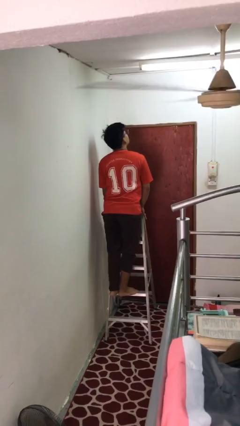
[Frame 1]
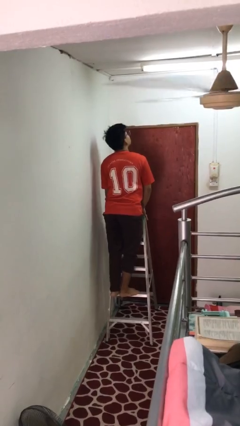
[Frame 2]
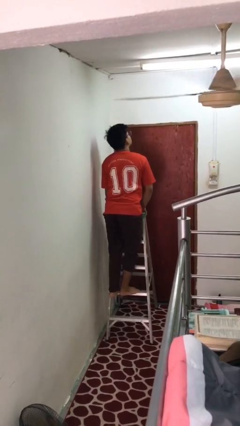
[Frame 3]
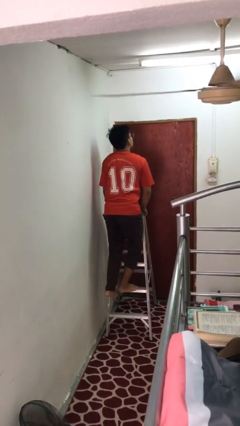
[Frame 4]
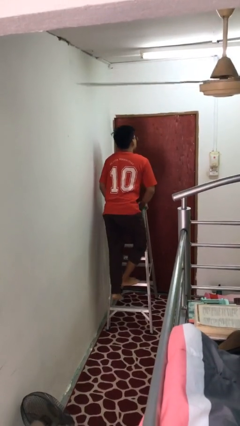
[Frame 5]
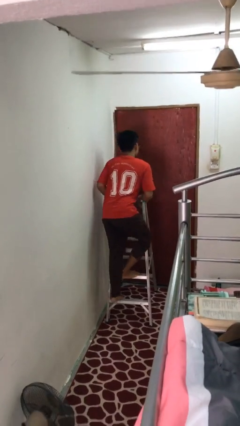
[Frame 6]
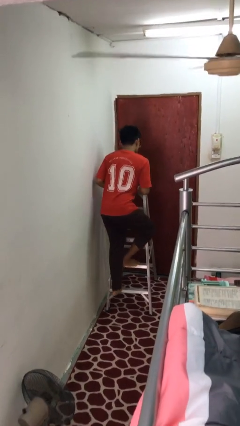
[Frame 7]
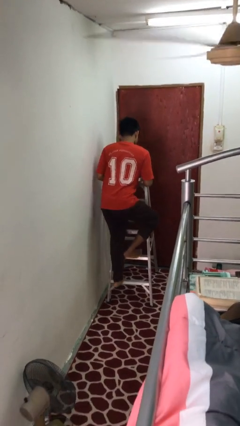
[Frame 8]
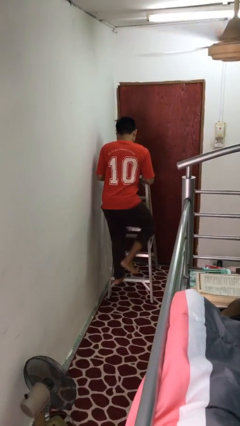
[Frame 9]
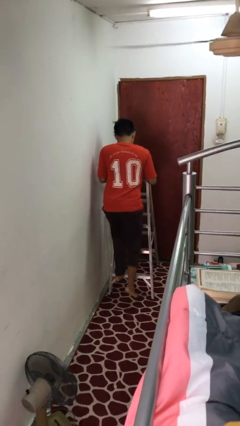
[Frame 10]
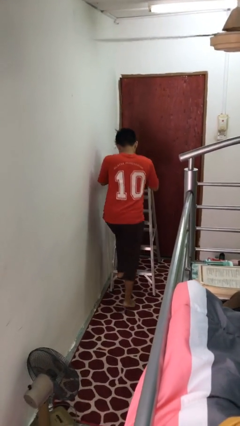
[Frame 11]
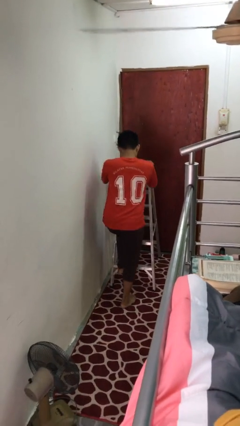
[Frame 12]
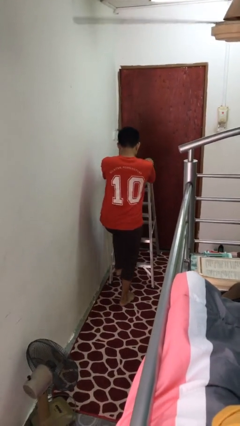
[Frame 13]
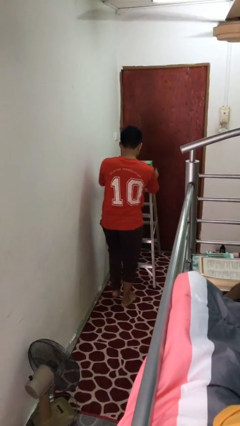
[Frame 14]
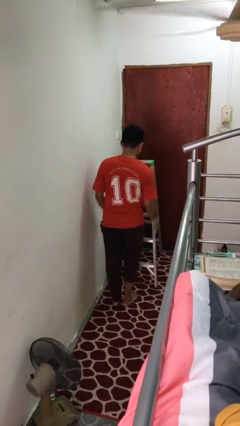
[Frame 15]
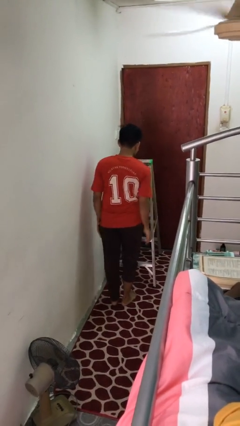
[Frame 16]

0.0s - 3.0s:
person climbs down ladder

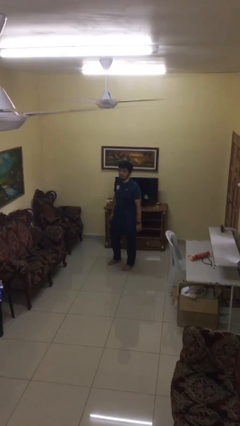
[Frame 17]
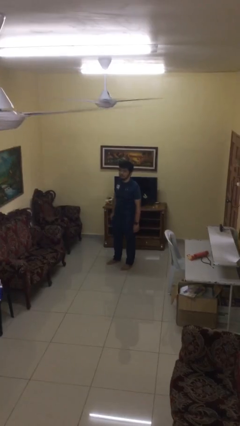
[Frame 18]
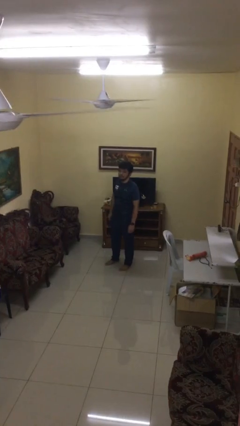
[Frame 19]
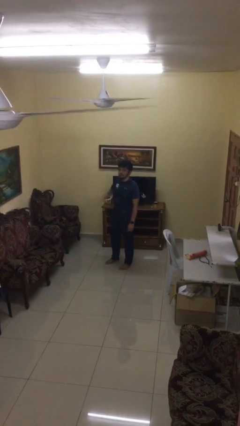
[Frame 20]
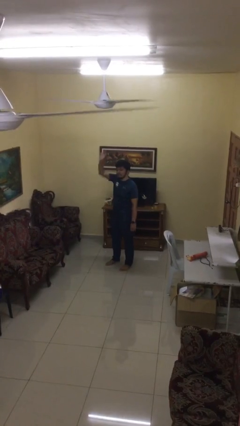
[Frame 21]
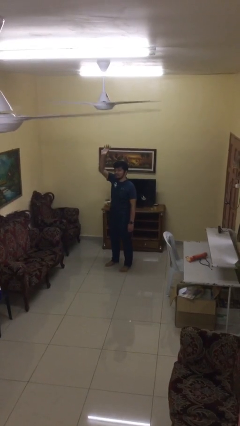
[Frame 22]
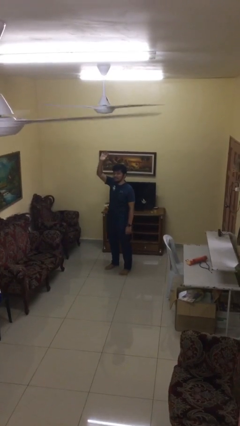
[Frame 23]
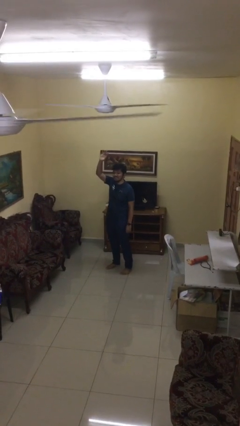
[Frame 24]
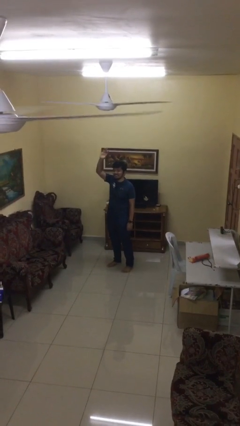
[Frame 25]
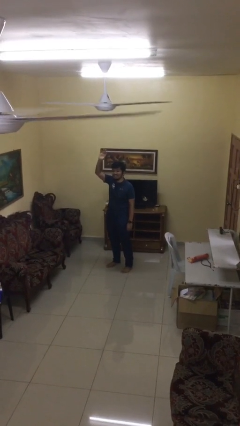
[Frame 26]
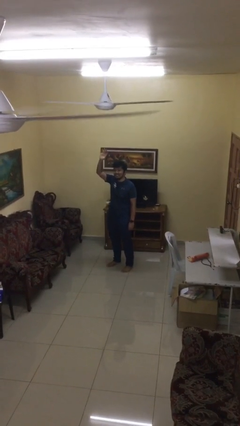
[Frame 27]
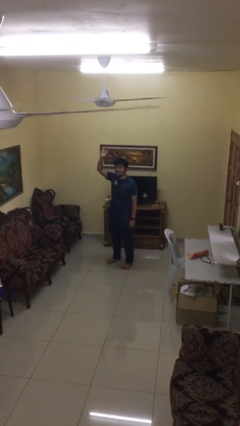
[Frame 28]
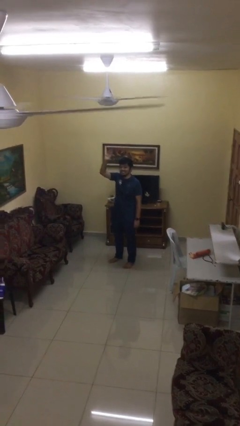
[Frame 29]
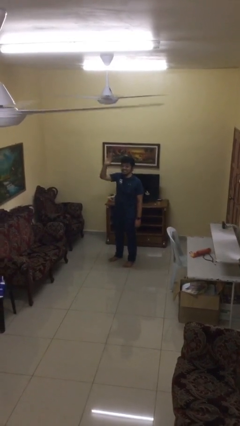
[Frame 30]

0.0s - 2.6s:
person gestures raise hand

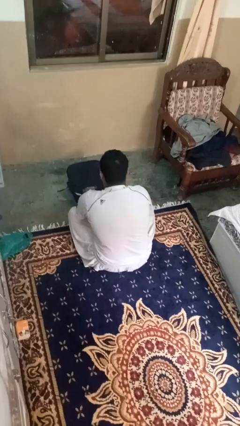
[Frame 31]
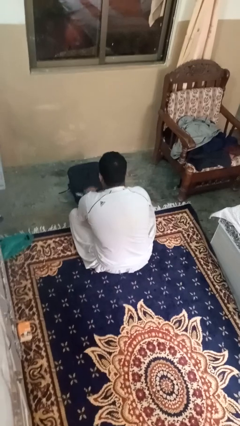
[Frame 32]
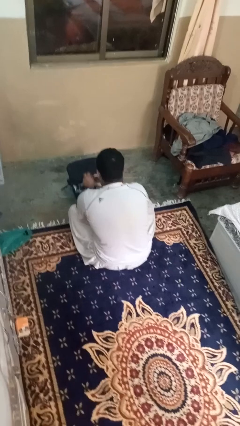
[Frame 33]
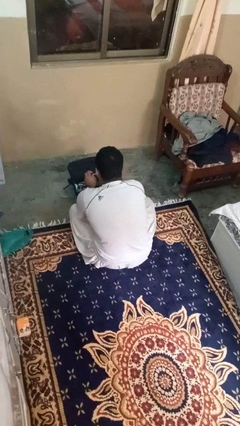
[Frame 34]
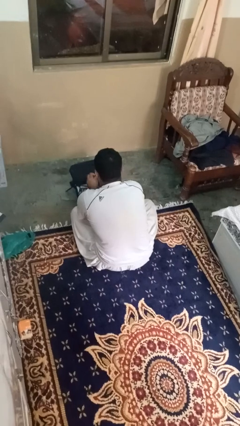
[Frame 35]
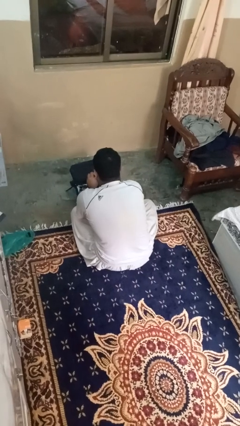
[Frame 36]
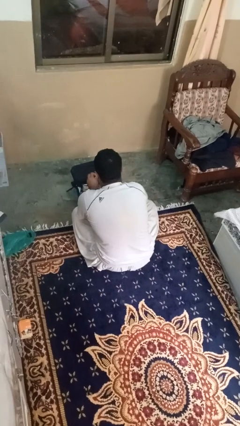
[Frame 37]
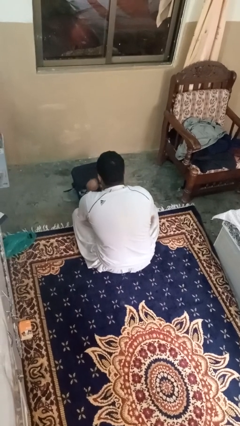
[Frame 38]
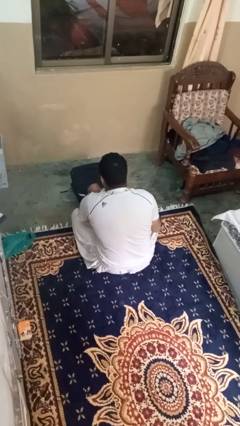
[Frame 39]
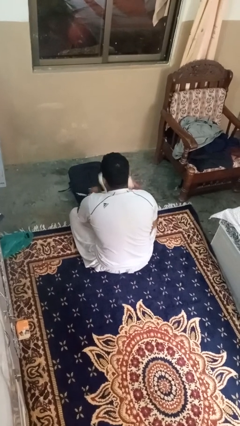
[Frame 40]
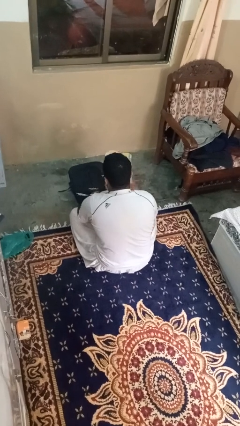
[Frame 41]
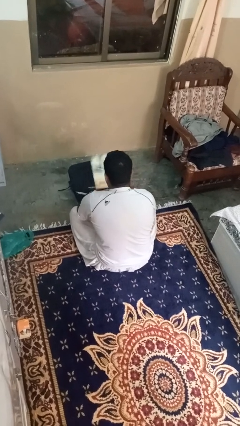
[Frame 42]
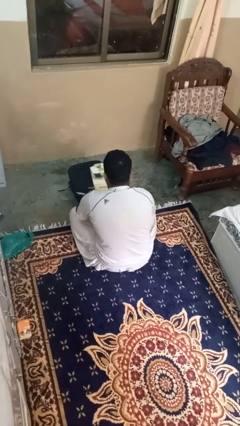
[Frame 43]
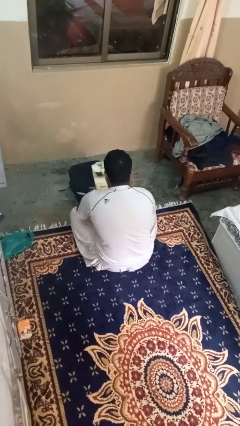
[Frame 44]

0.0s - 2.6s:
person takes object from bag

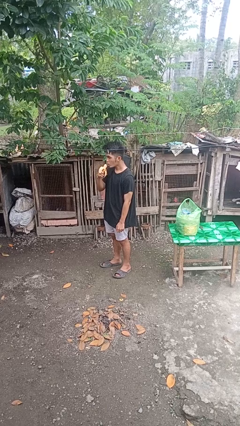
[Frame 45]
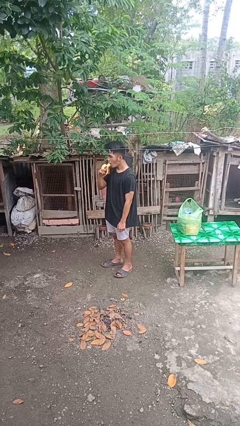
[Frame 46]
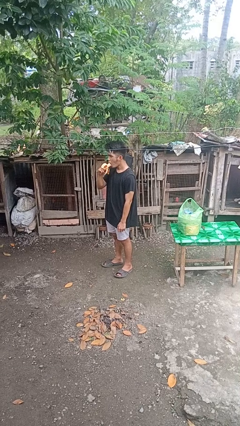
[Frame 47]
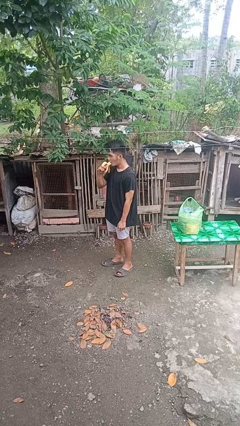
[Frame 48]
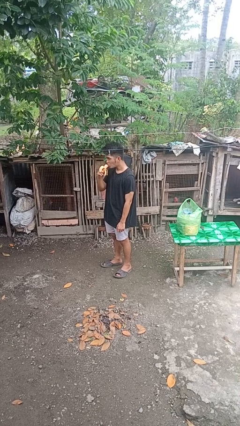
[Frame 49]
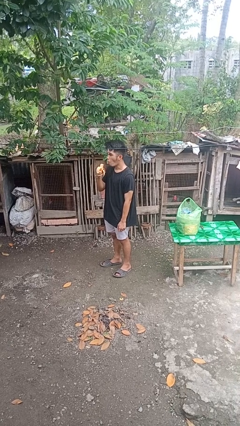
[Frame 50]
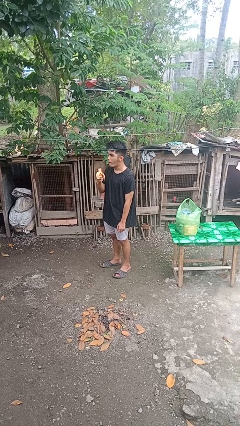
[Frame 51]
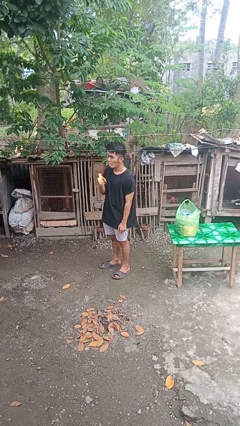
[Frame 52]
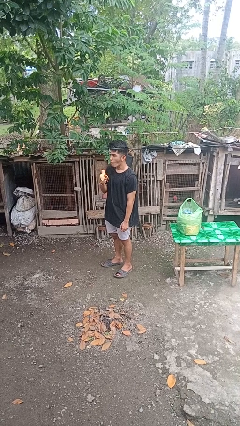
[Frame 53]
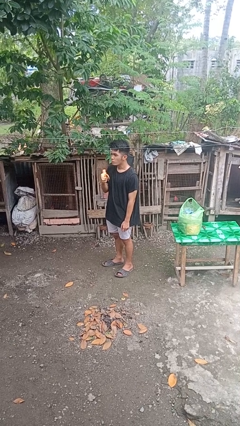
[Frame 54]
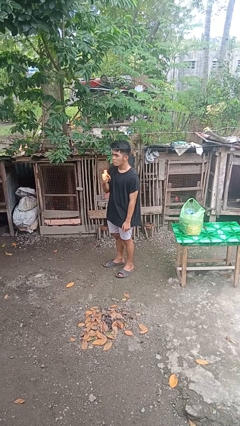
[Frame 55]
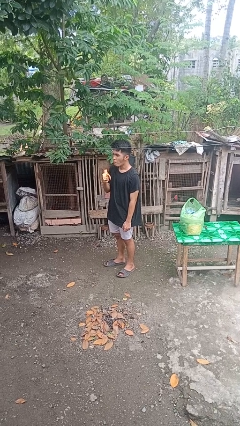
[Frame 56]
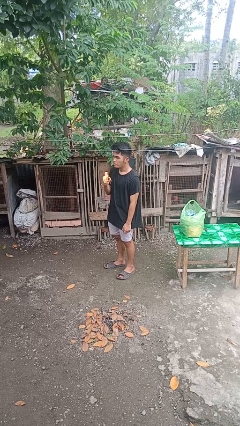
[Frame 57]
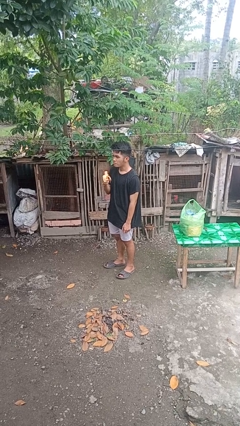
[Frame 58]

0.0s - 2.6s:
person eats banana

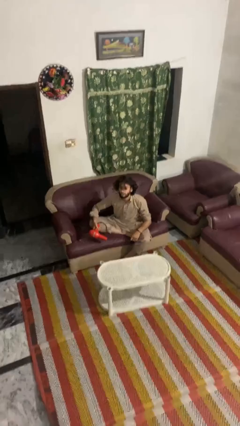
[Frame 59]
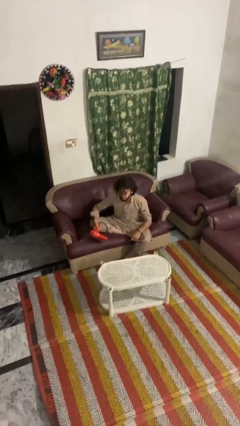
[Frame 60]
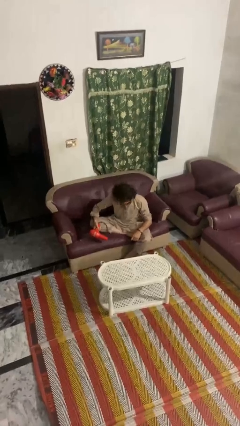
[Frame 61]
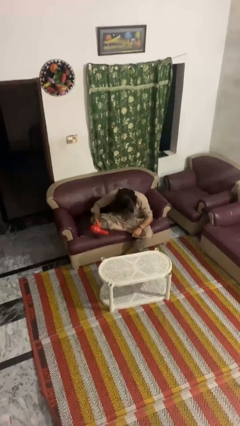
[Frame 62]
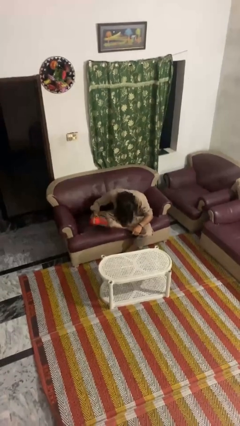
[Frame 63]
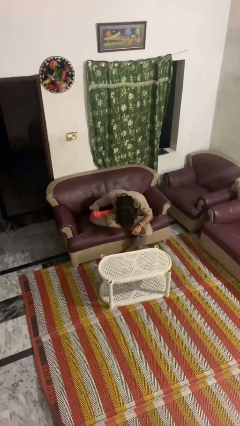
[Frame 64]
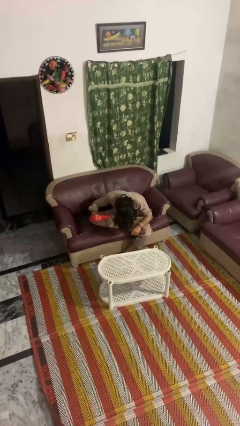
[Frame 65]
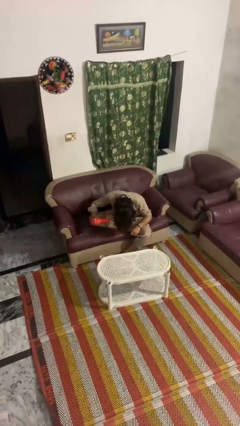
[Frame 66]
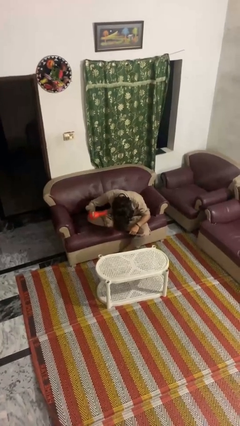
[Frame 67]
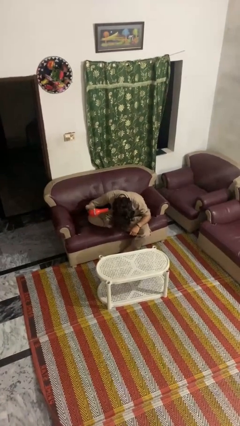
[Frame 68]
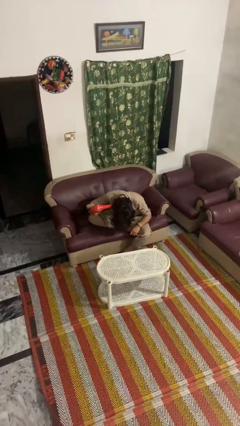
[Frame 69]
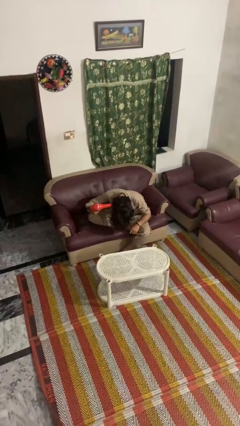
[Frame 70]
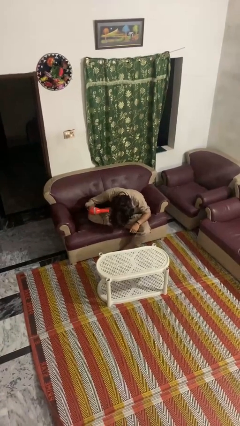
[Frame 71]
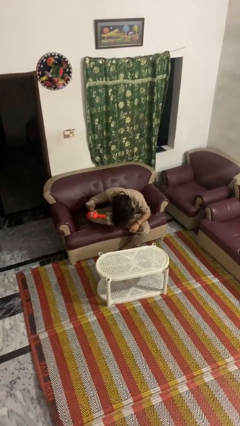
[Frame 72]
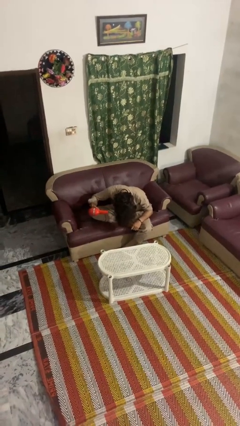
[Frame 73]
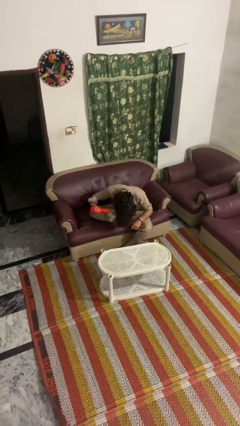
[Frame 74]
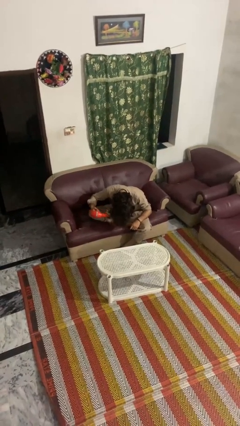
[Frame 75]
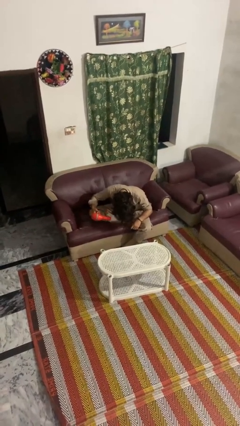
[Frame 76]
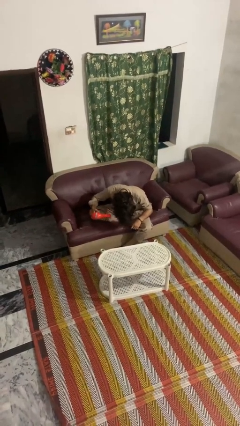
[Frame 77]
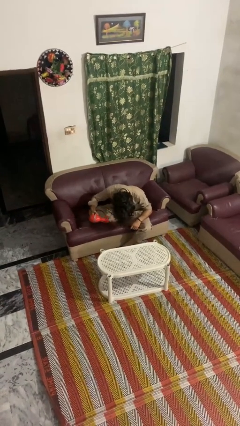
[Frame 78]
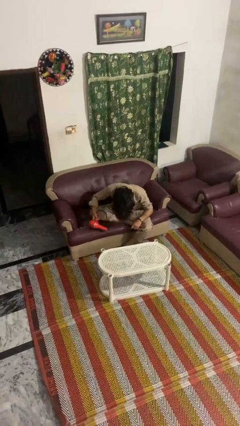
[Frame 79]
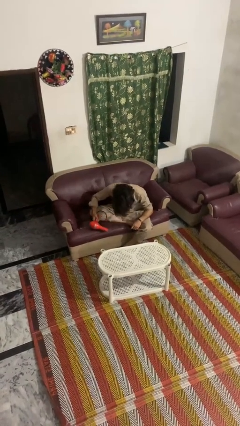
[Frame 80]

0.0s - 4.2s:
person dries hair with hairdryer

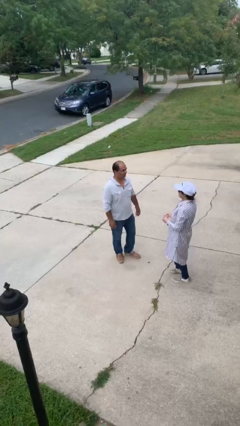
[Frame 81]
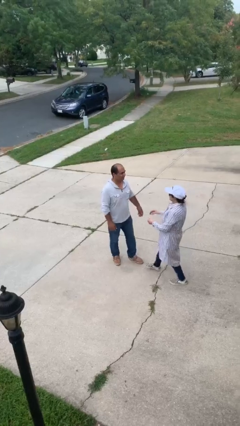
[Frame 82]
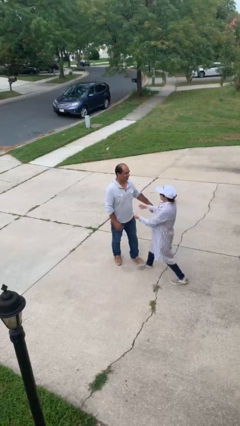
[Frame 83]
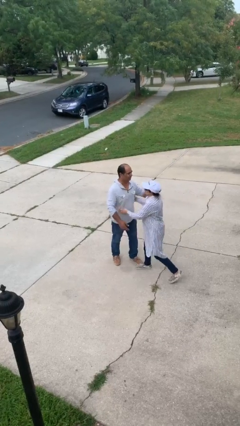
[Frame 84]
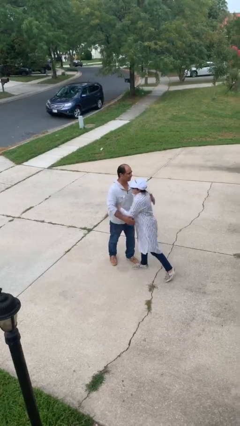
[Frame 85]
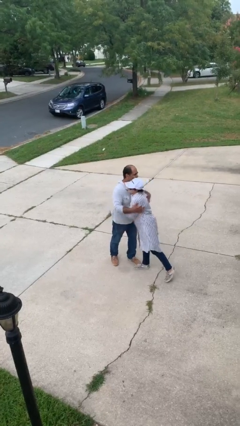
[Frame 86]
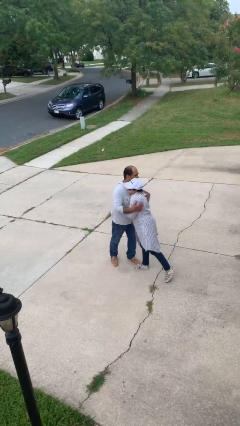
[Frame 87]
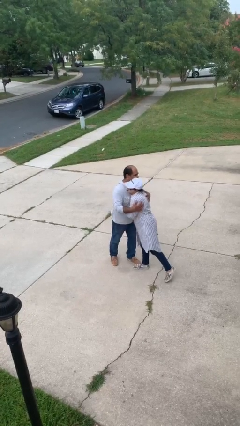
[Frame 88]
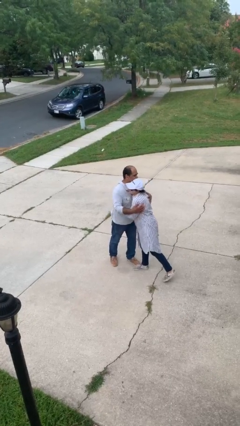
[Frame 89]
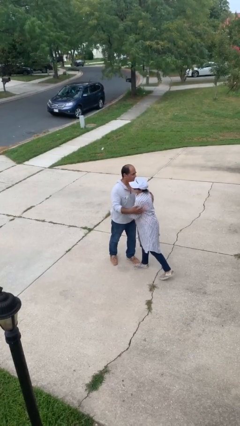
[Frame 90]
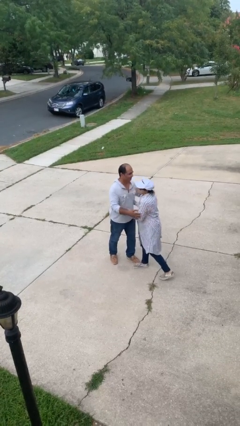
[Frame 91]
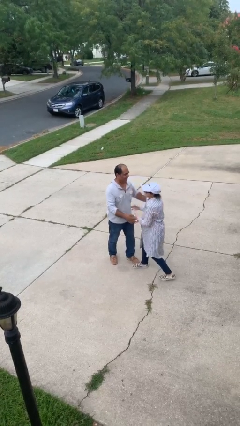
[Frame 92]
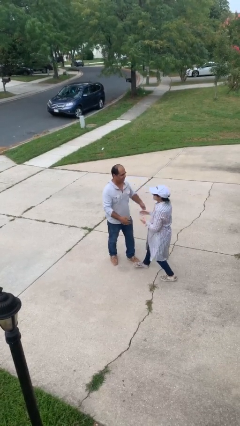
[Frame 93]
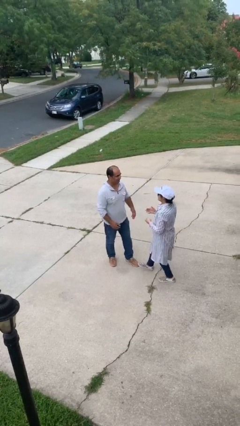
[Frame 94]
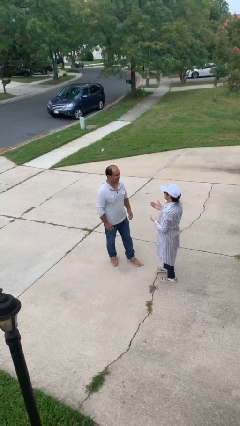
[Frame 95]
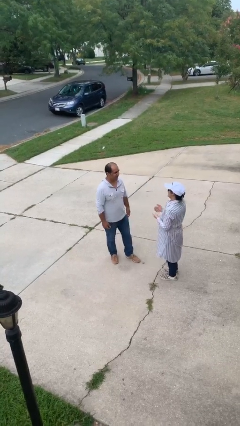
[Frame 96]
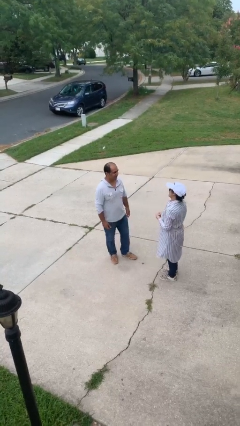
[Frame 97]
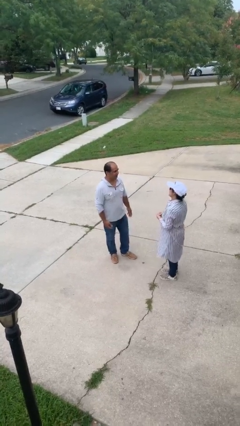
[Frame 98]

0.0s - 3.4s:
person embraces person
